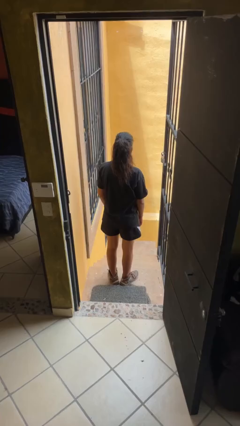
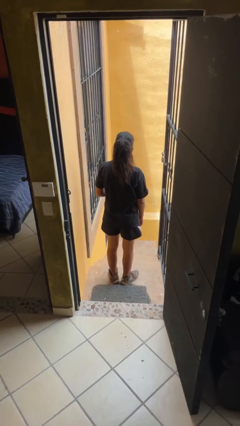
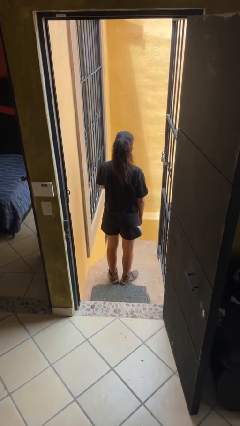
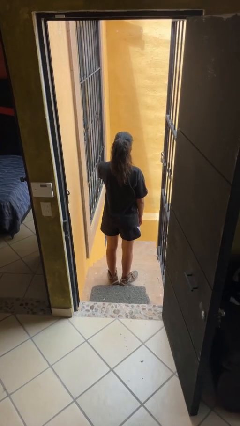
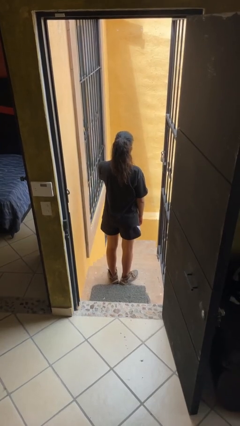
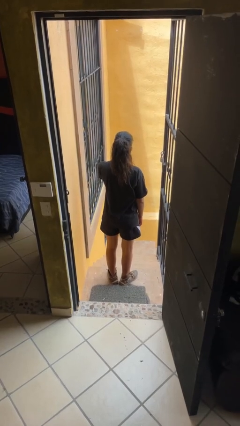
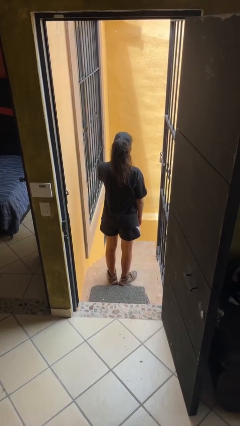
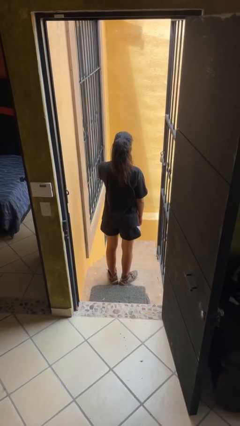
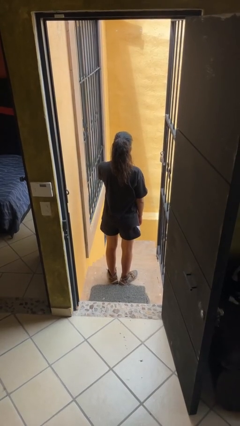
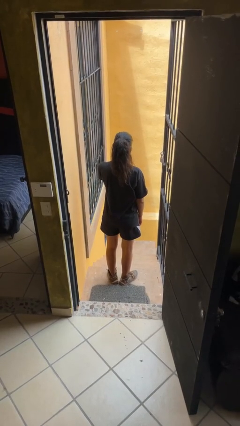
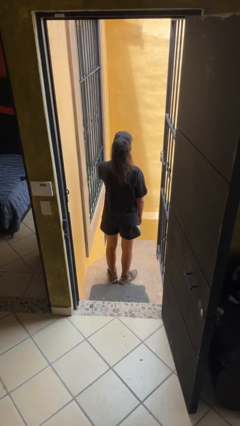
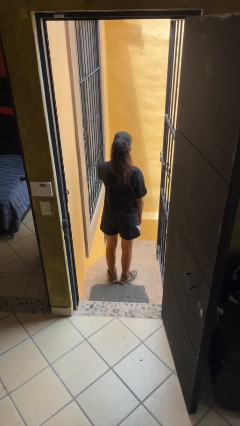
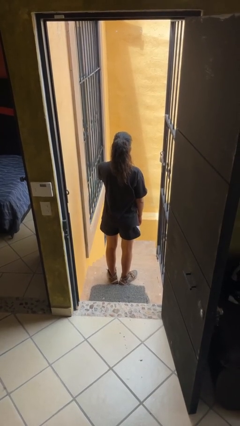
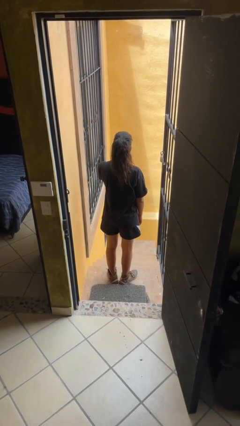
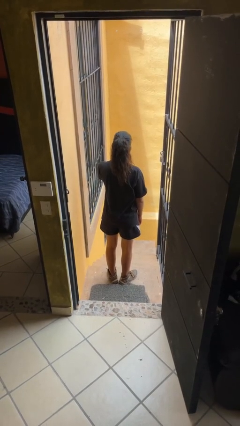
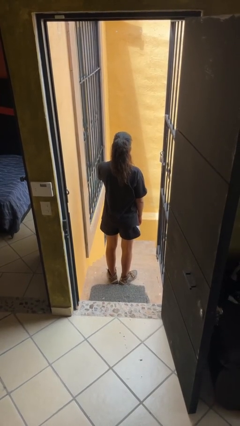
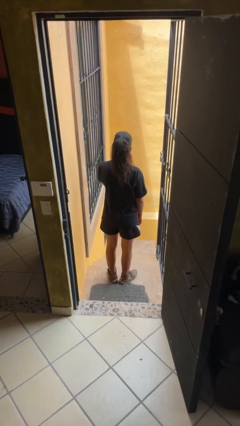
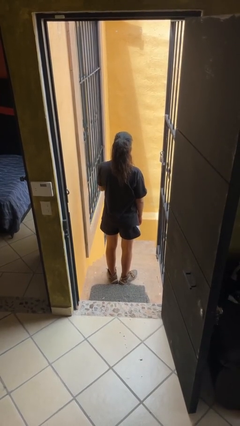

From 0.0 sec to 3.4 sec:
person scratches face

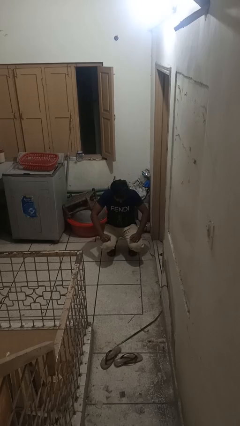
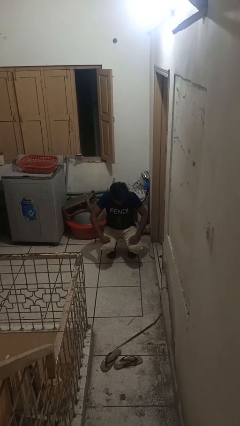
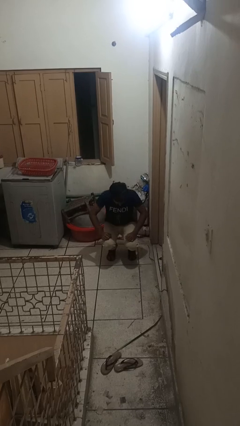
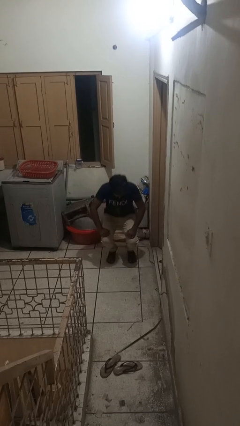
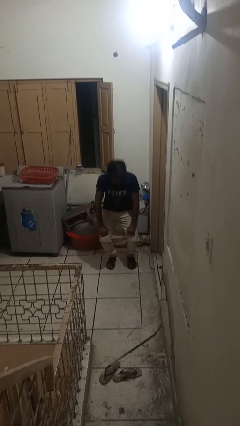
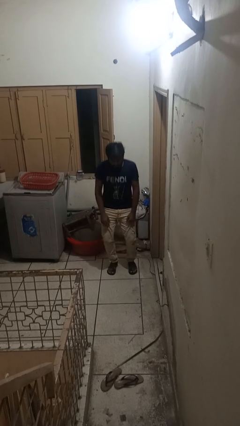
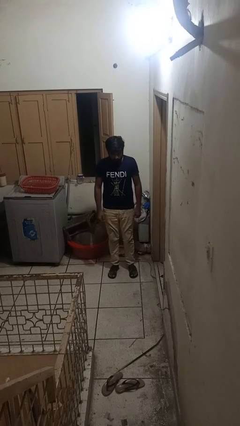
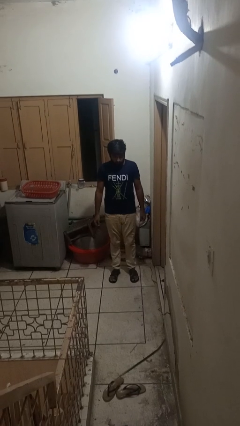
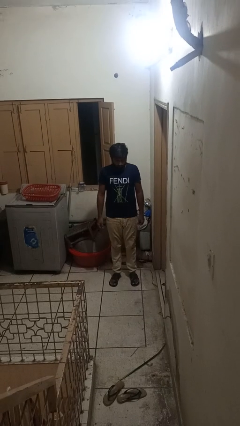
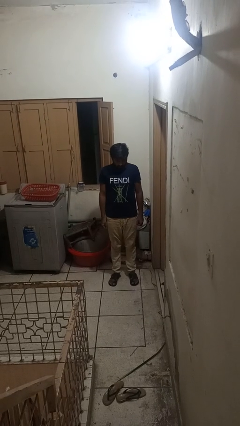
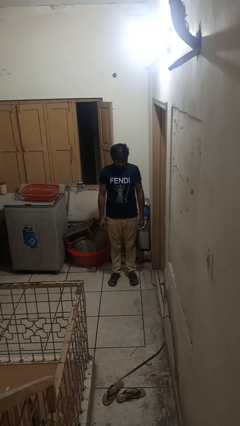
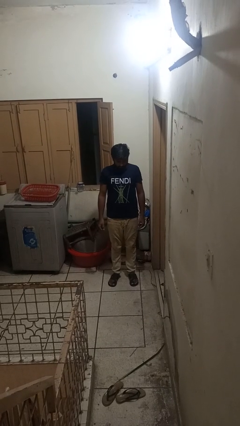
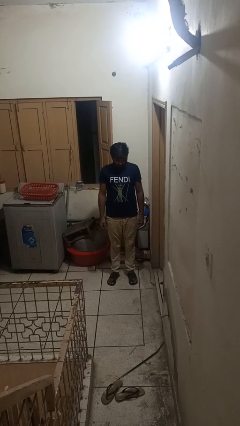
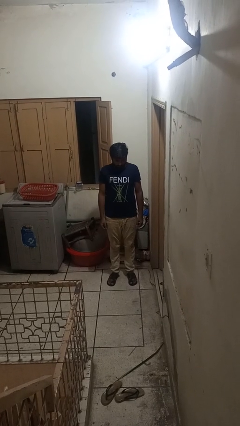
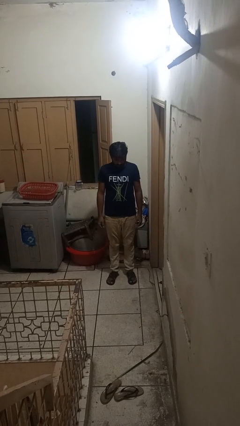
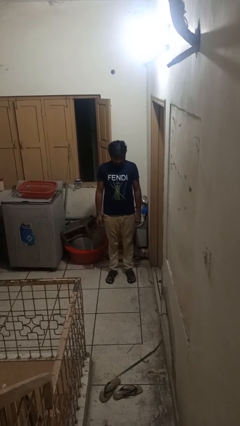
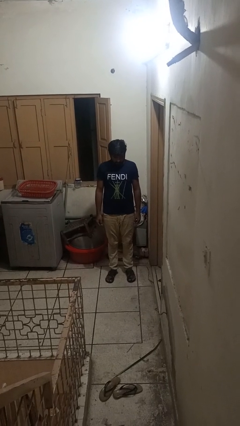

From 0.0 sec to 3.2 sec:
person stands up

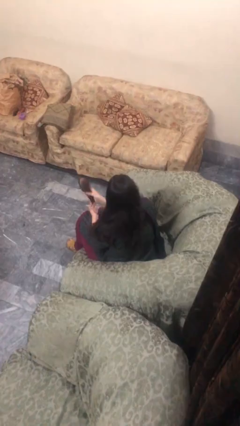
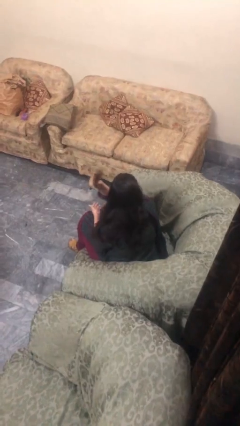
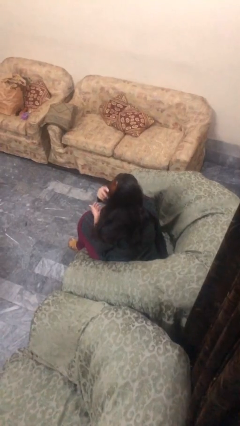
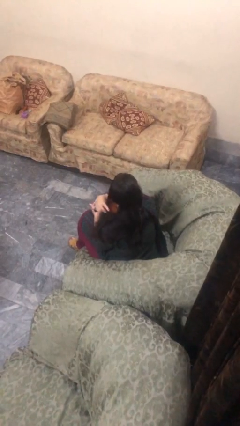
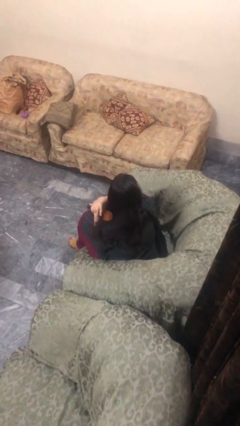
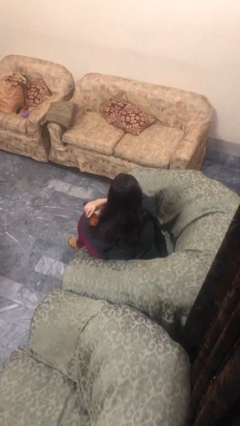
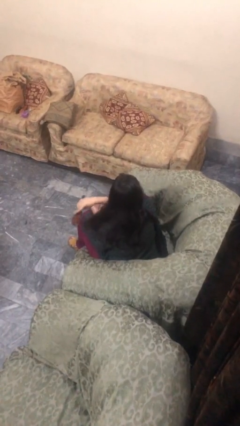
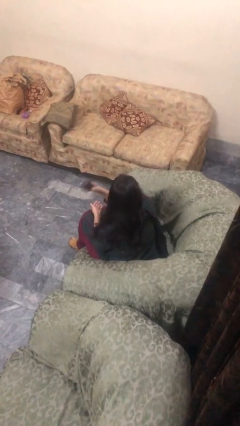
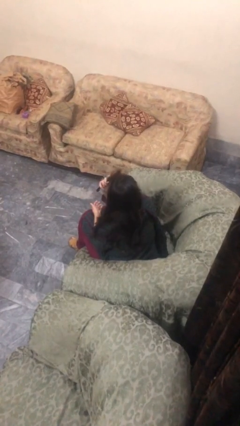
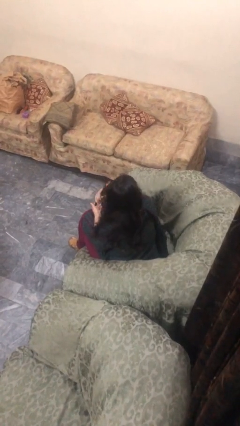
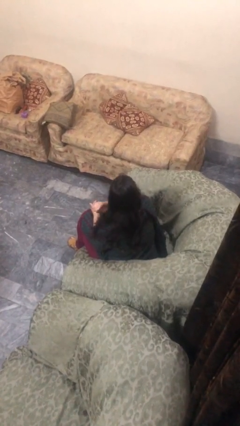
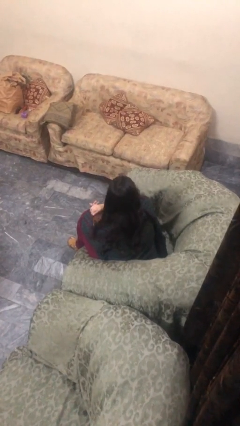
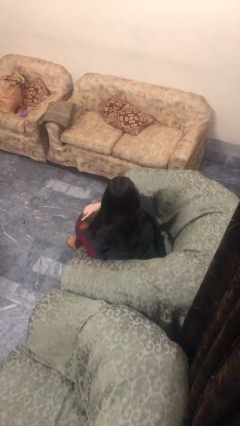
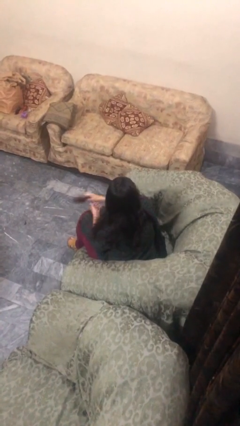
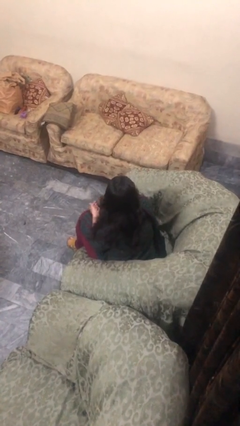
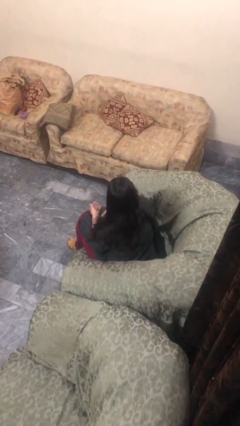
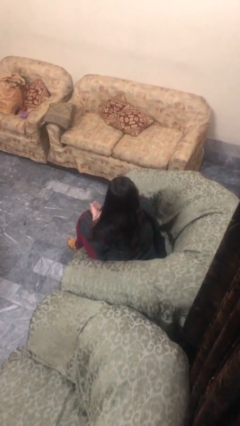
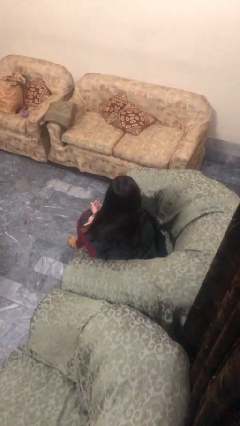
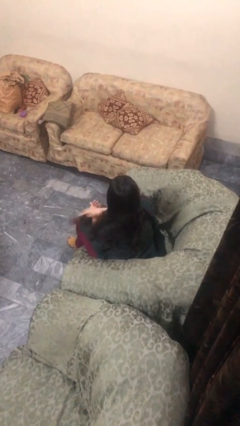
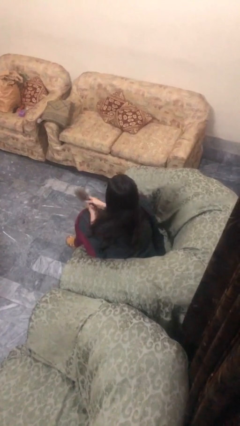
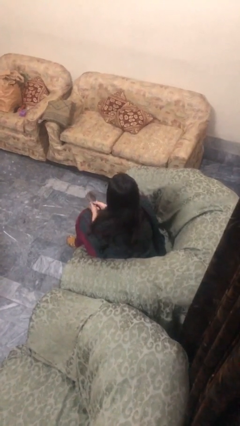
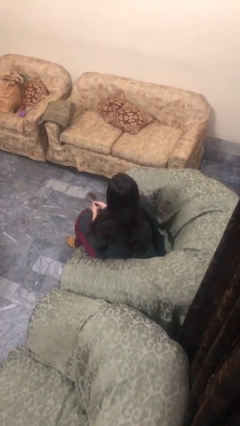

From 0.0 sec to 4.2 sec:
person brushes hair

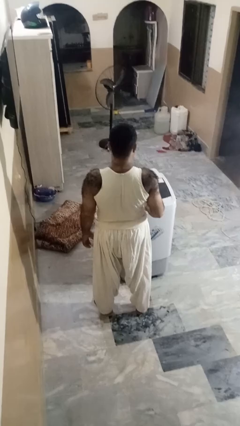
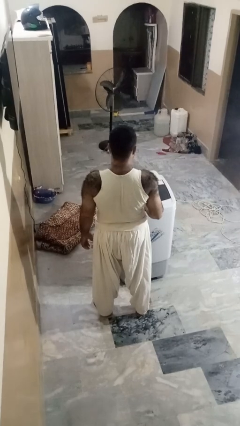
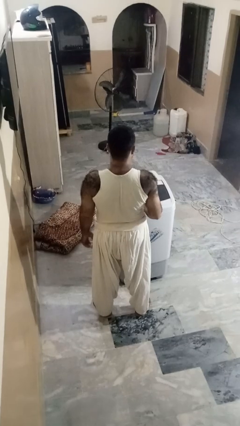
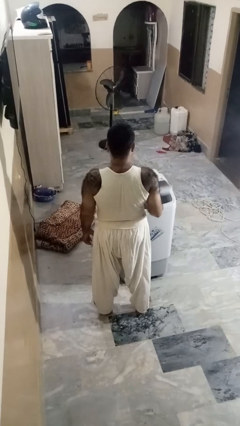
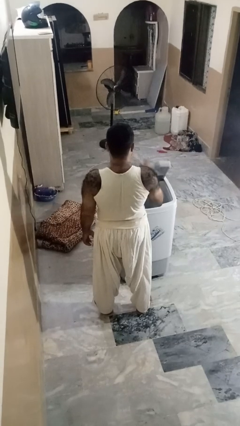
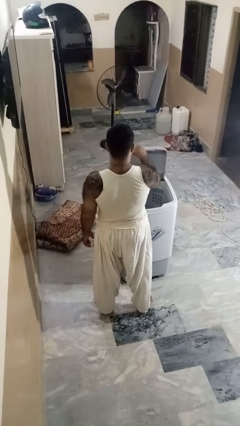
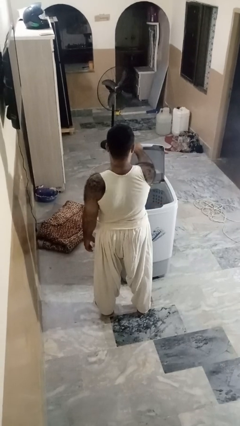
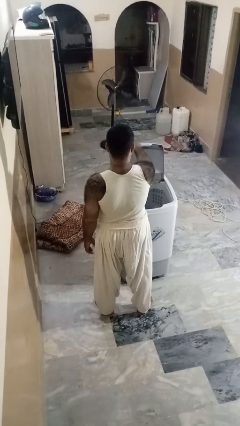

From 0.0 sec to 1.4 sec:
person opens clothes washer

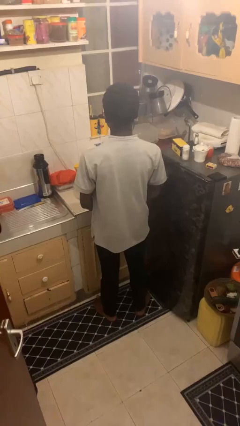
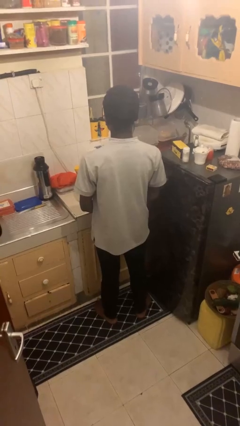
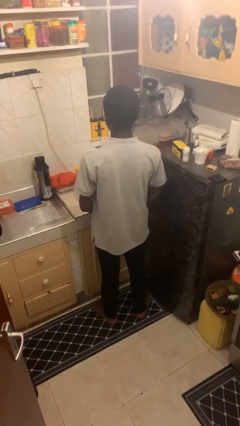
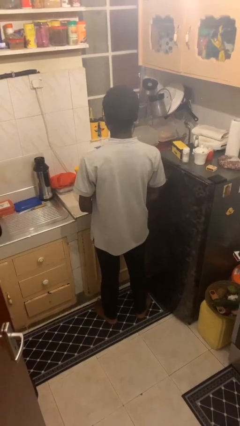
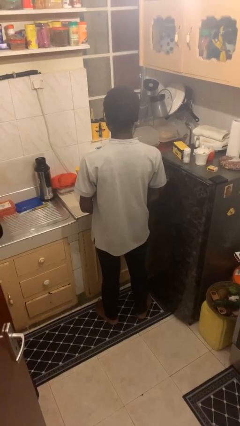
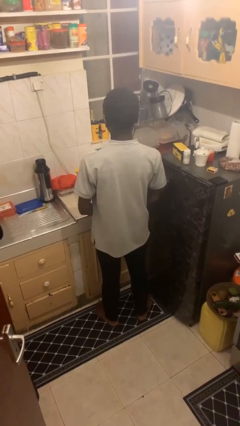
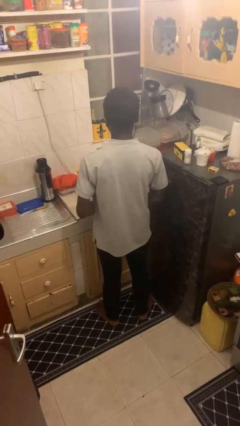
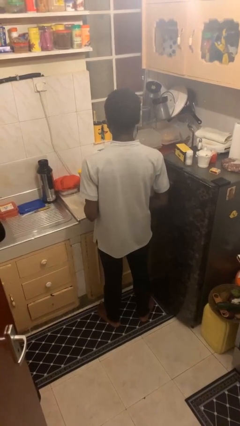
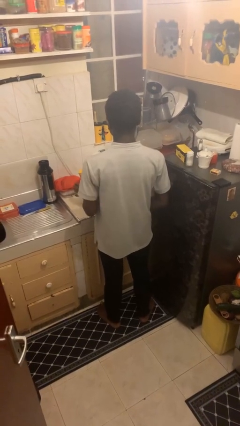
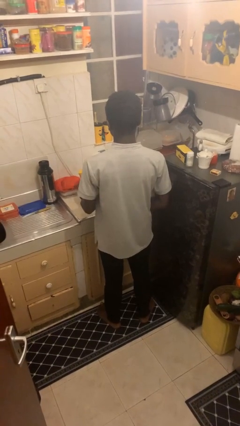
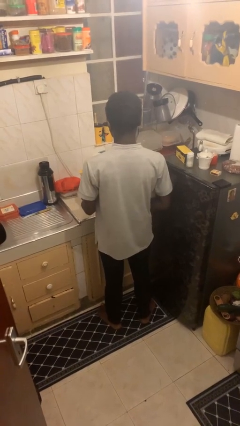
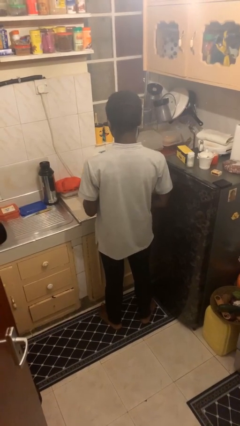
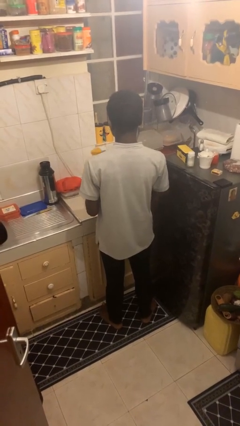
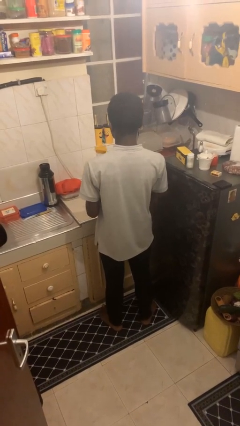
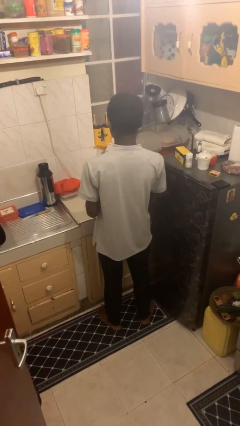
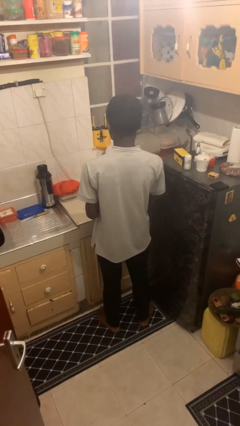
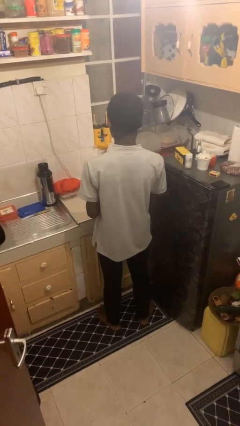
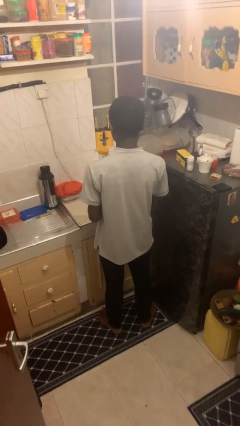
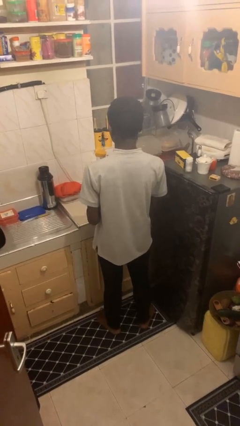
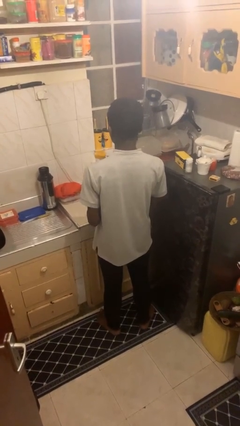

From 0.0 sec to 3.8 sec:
person picks up object from countertop

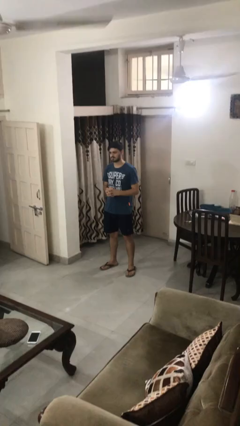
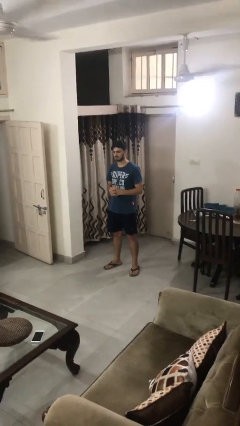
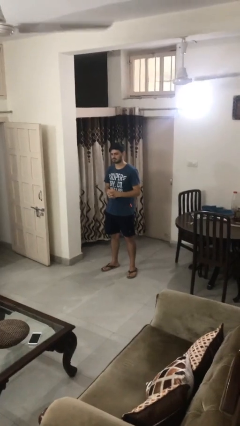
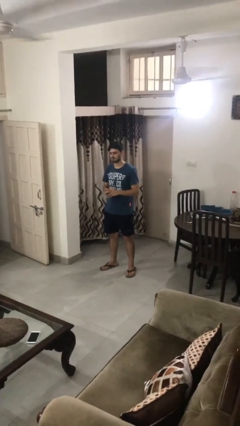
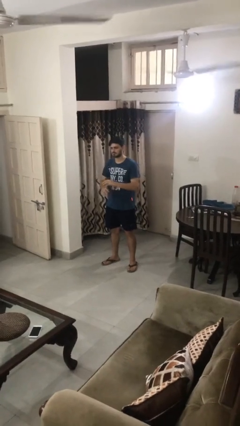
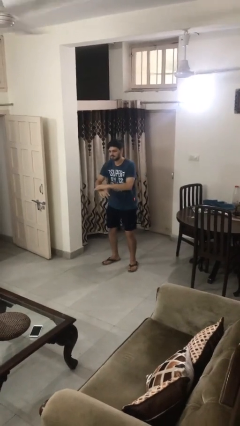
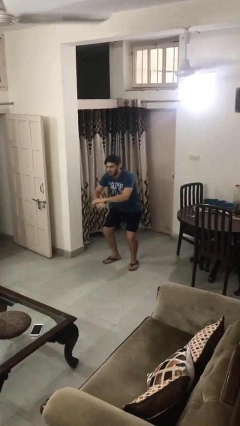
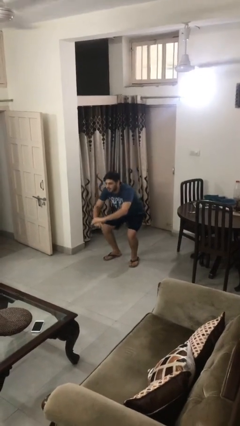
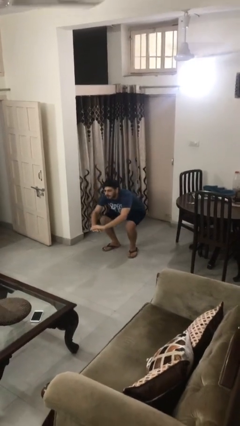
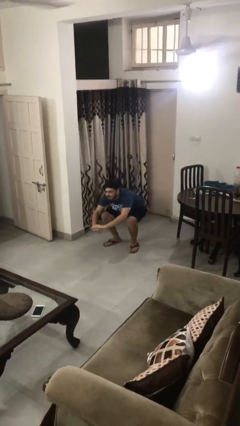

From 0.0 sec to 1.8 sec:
person squats
